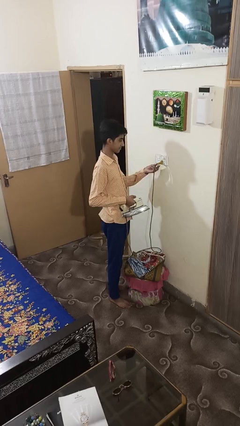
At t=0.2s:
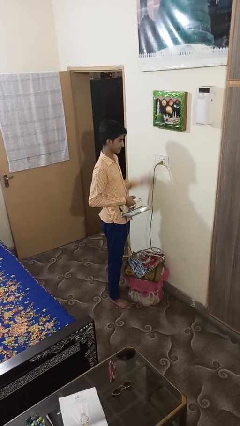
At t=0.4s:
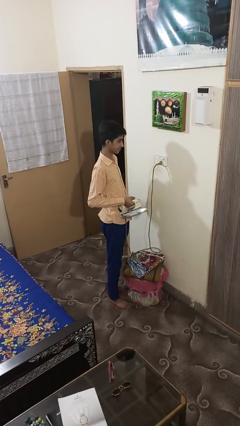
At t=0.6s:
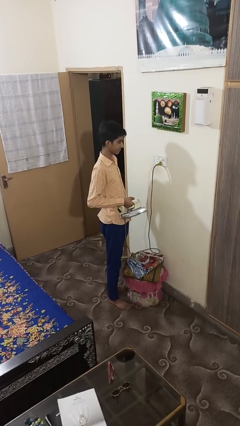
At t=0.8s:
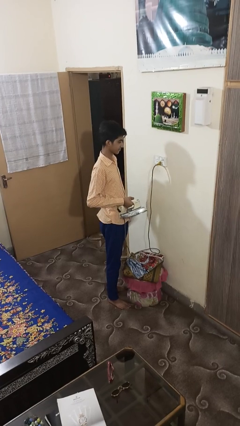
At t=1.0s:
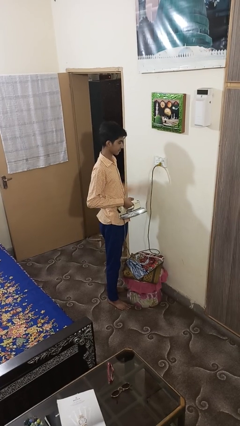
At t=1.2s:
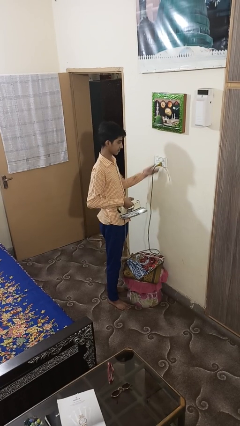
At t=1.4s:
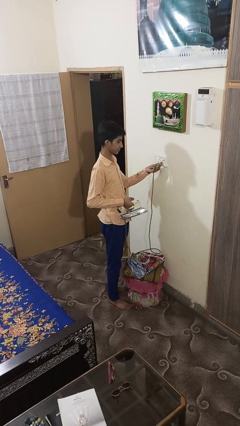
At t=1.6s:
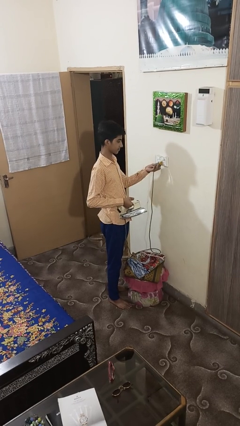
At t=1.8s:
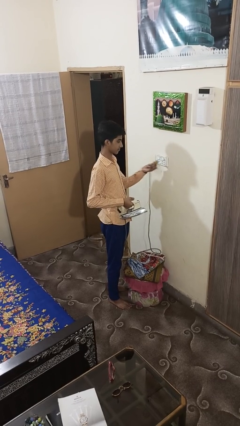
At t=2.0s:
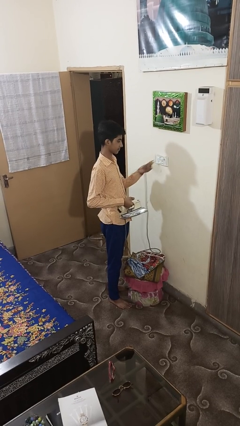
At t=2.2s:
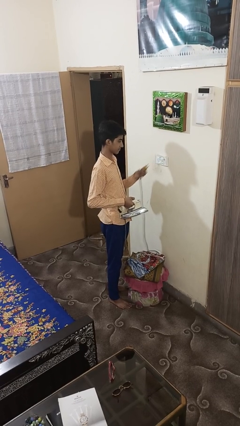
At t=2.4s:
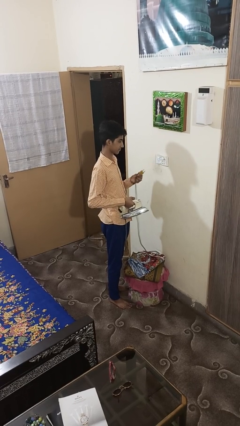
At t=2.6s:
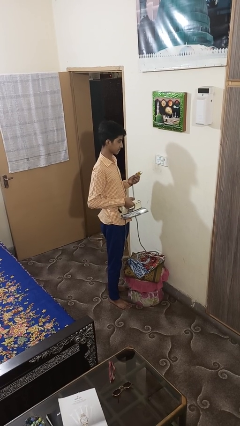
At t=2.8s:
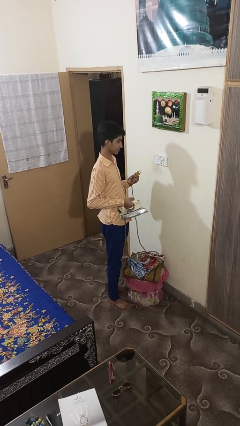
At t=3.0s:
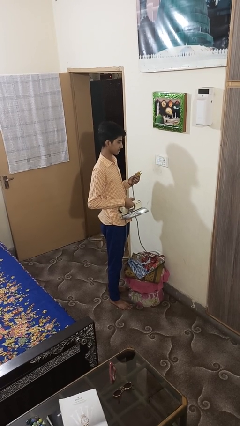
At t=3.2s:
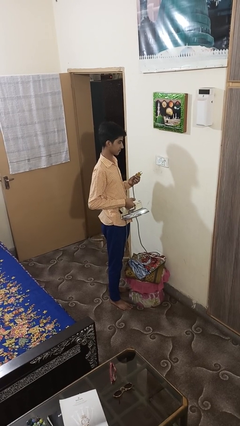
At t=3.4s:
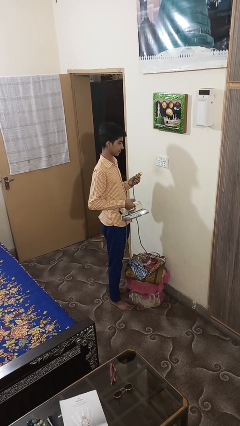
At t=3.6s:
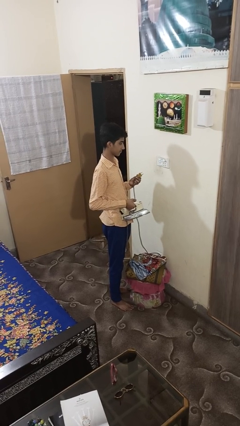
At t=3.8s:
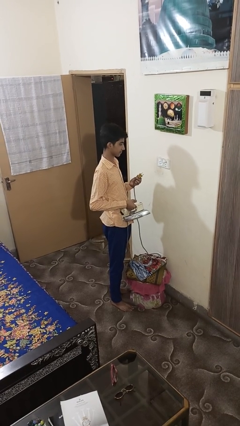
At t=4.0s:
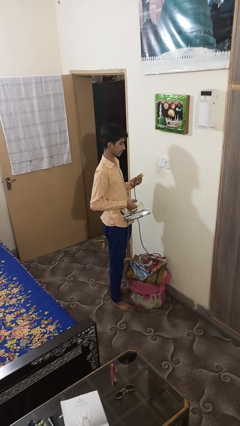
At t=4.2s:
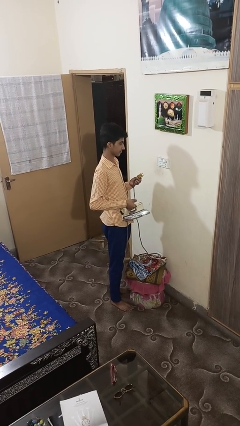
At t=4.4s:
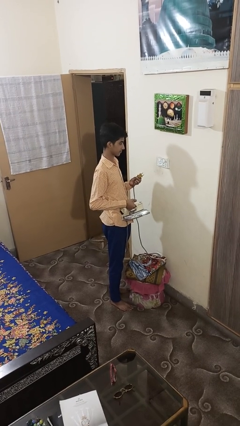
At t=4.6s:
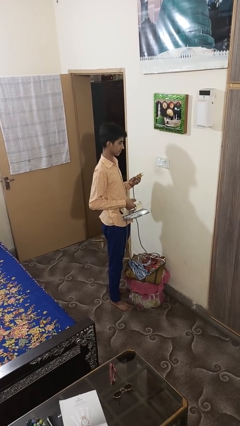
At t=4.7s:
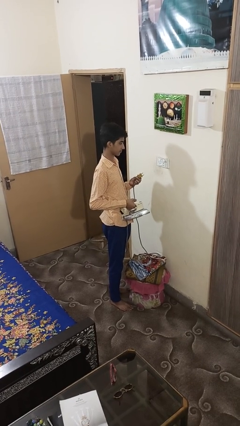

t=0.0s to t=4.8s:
person unplugs from electrical socket

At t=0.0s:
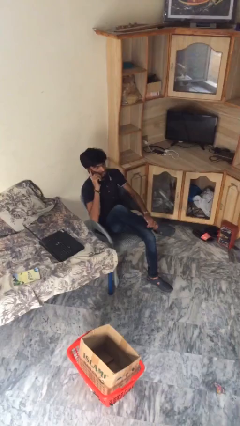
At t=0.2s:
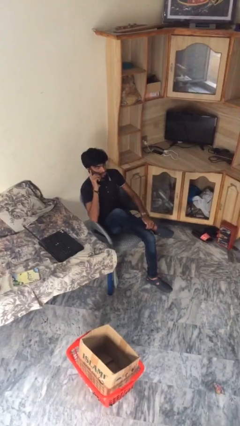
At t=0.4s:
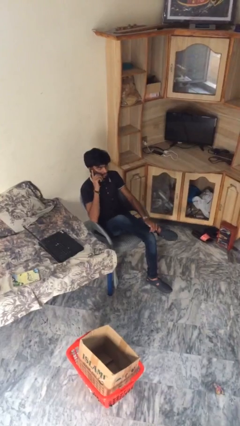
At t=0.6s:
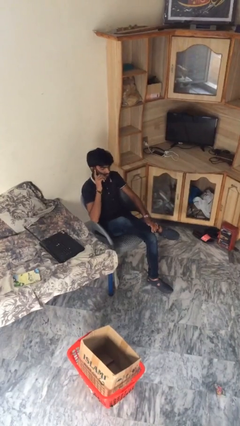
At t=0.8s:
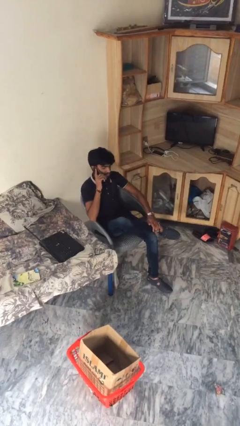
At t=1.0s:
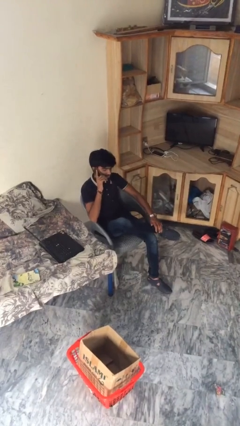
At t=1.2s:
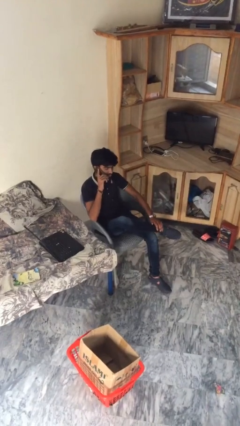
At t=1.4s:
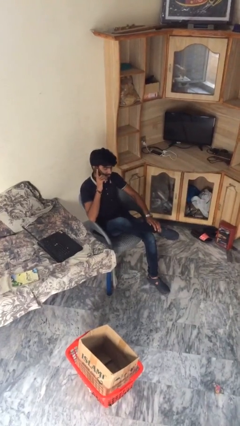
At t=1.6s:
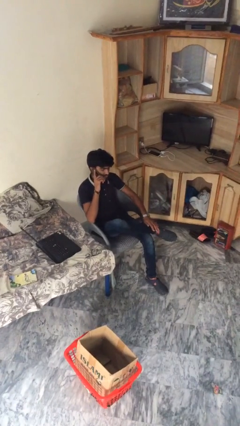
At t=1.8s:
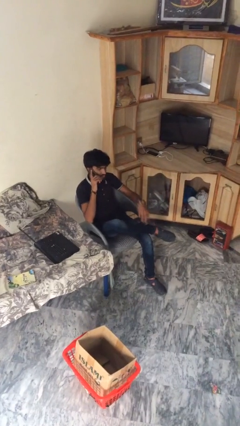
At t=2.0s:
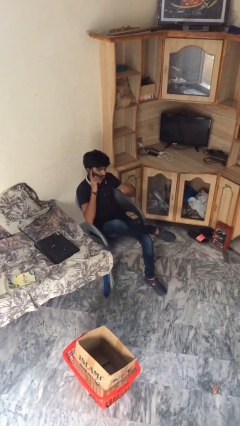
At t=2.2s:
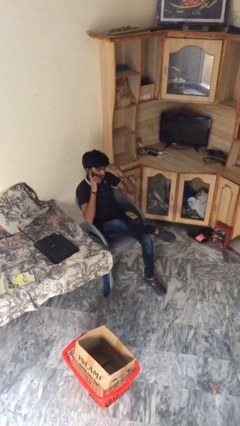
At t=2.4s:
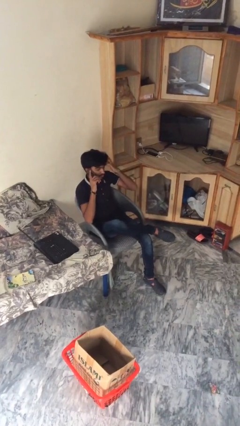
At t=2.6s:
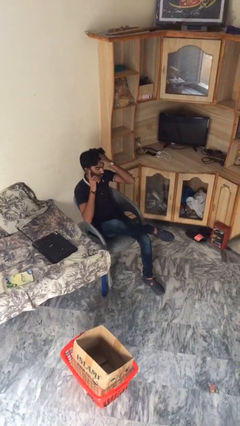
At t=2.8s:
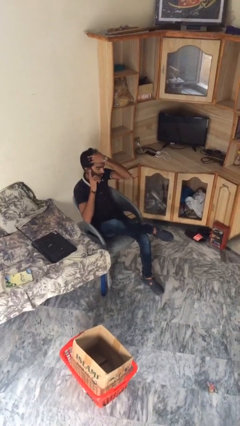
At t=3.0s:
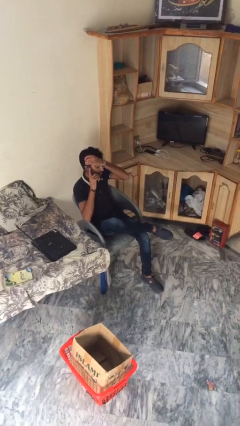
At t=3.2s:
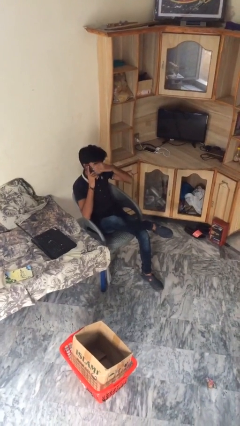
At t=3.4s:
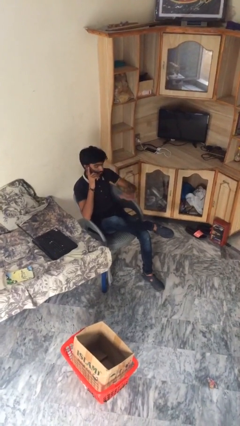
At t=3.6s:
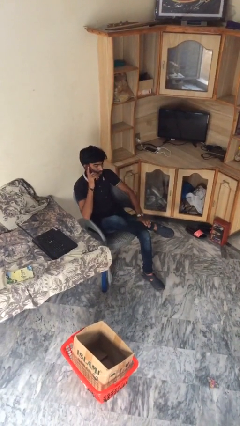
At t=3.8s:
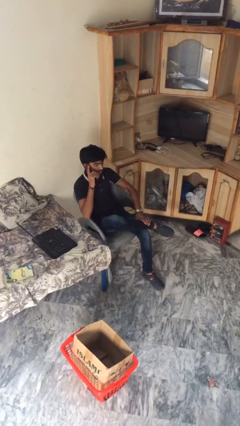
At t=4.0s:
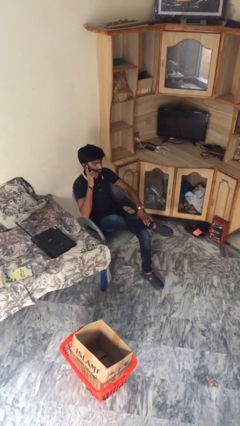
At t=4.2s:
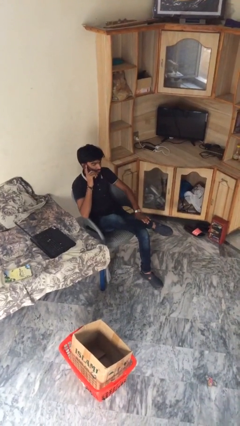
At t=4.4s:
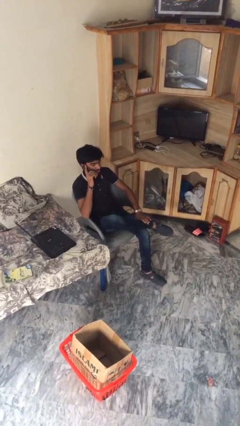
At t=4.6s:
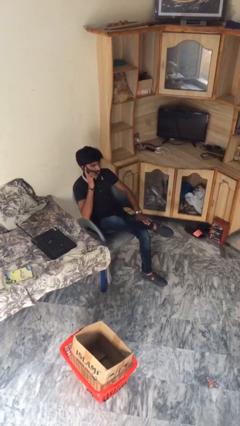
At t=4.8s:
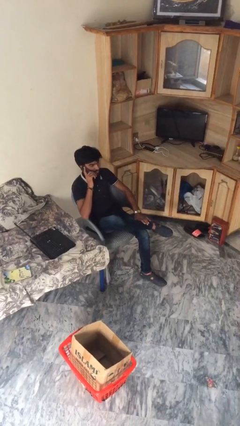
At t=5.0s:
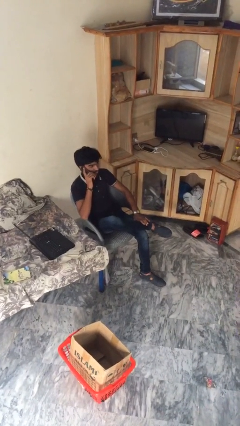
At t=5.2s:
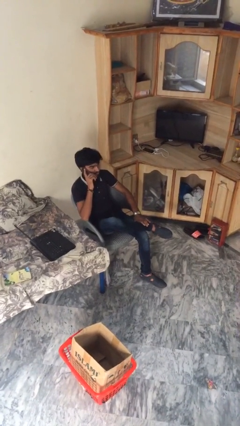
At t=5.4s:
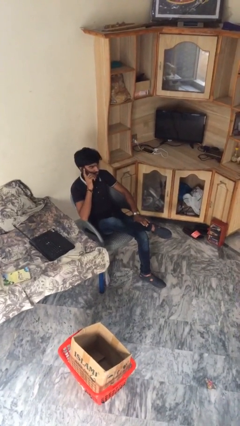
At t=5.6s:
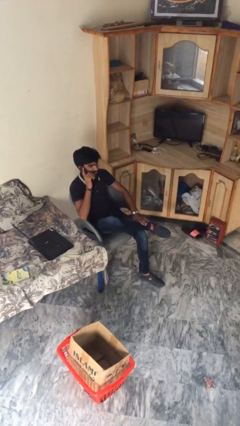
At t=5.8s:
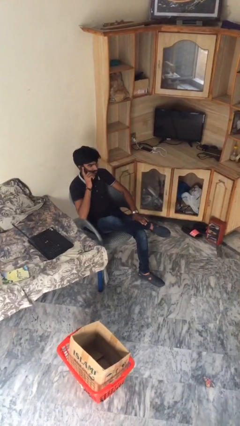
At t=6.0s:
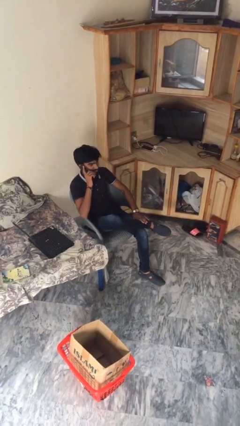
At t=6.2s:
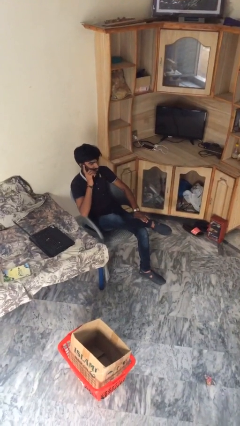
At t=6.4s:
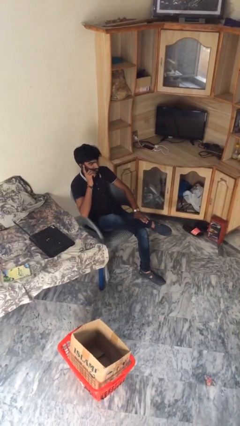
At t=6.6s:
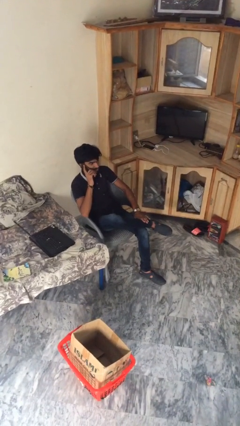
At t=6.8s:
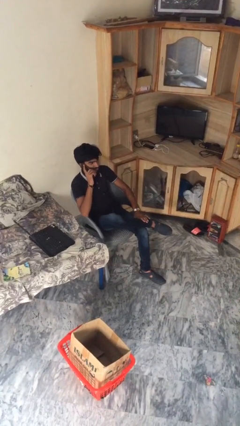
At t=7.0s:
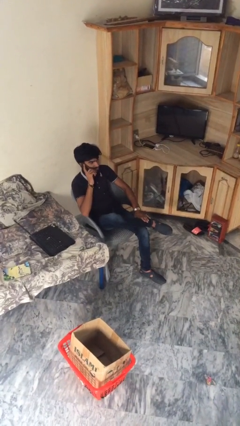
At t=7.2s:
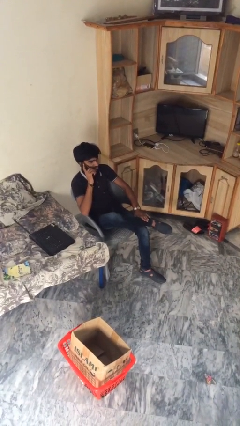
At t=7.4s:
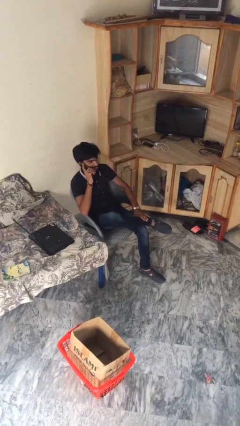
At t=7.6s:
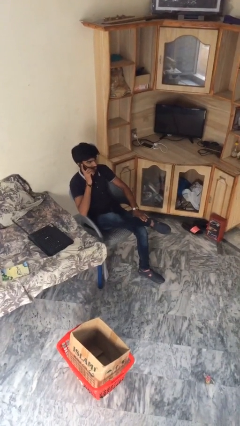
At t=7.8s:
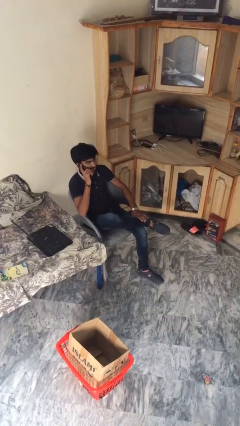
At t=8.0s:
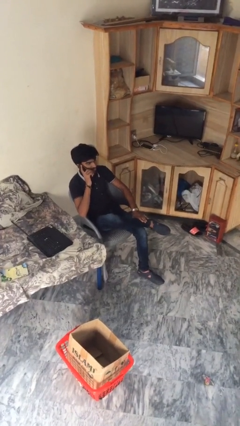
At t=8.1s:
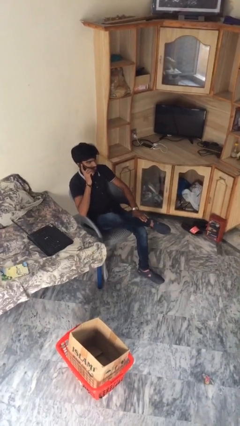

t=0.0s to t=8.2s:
person talks on phone

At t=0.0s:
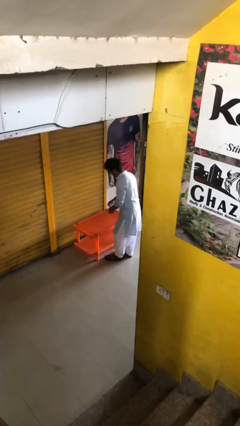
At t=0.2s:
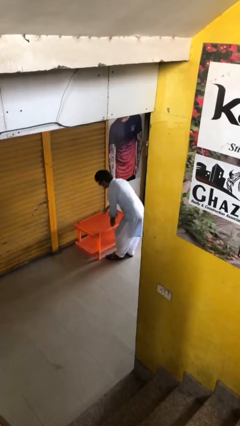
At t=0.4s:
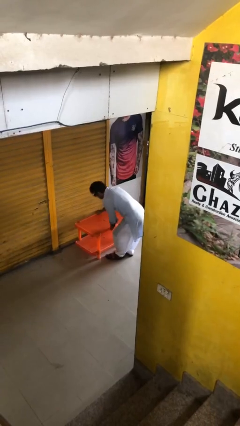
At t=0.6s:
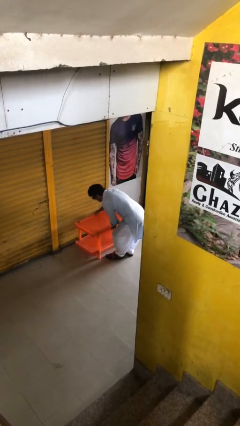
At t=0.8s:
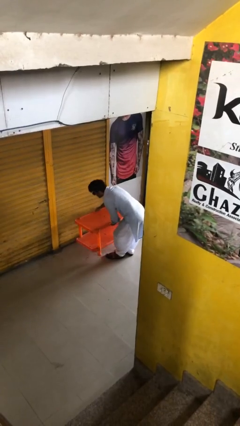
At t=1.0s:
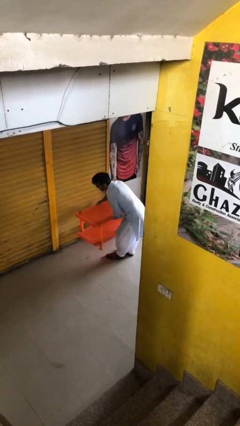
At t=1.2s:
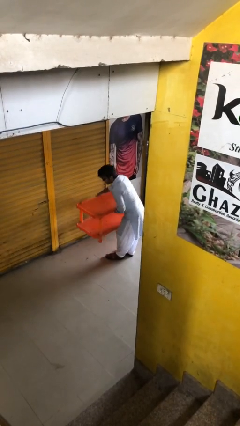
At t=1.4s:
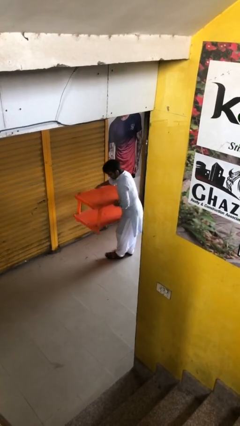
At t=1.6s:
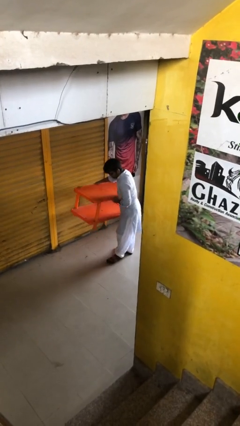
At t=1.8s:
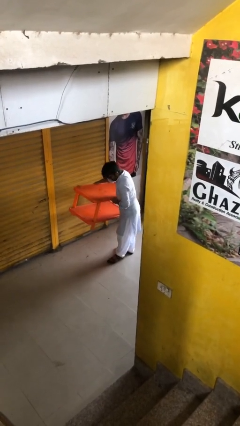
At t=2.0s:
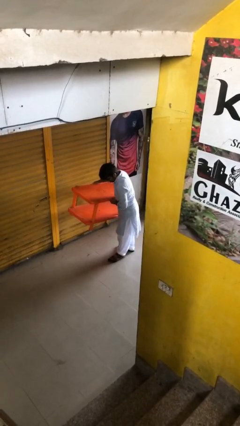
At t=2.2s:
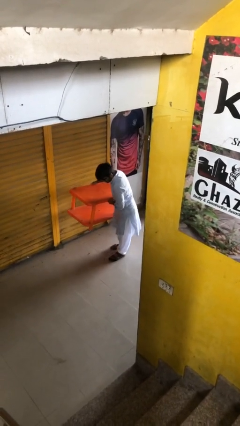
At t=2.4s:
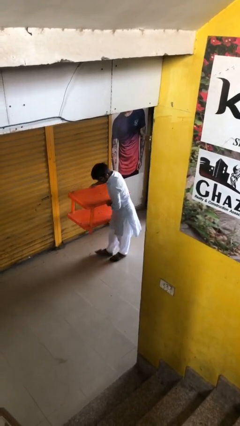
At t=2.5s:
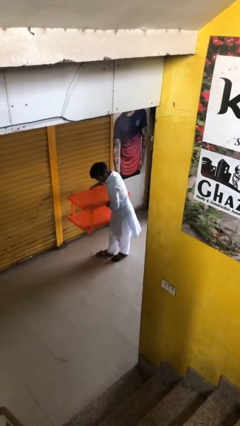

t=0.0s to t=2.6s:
person picks up object from floor

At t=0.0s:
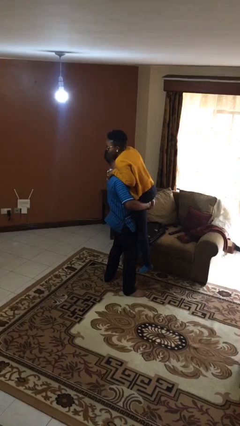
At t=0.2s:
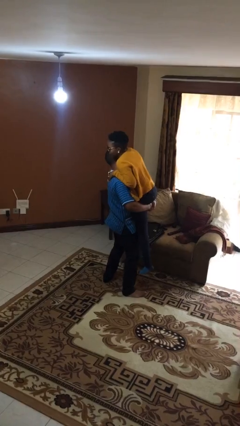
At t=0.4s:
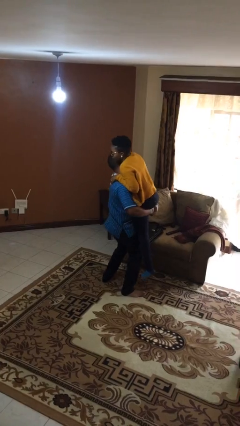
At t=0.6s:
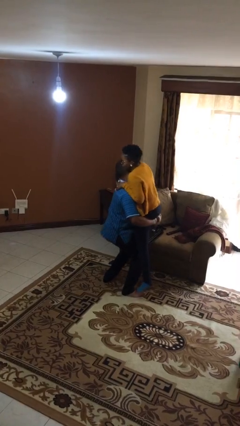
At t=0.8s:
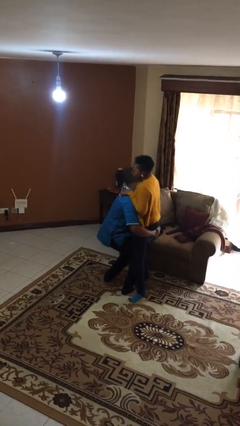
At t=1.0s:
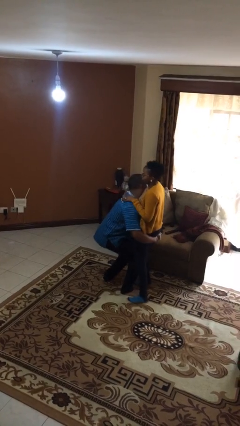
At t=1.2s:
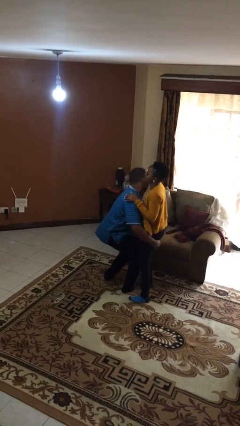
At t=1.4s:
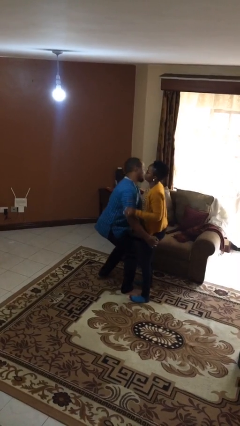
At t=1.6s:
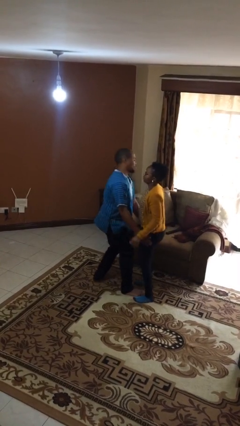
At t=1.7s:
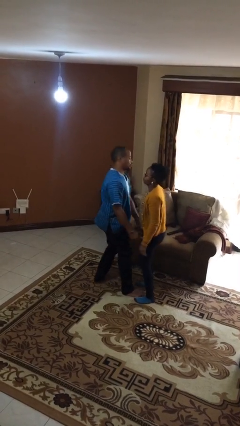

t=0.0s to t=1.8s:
person puts down person

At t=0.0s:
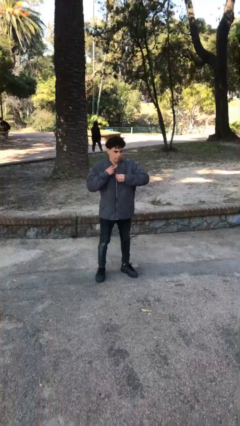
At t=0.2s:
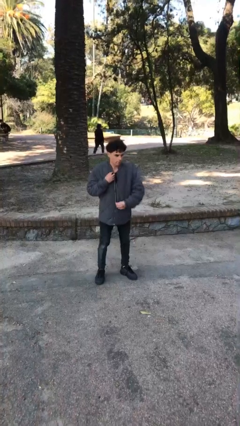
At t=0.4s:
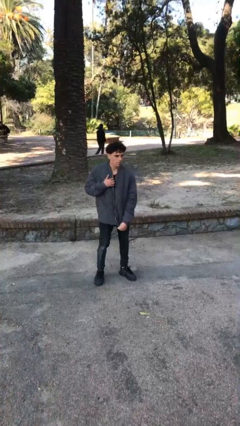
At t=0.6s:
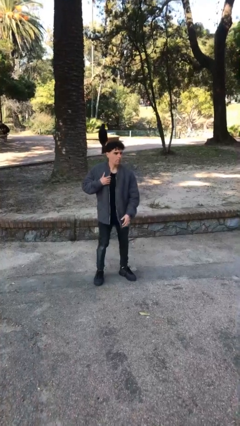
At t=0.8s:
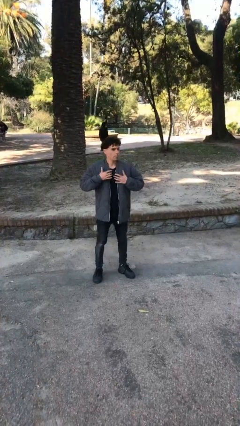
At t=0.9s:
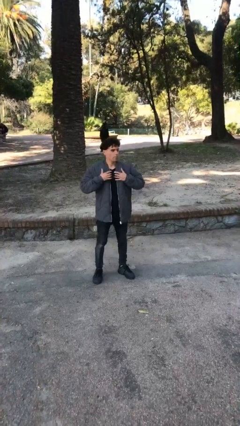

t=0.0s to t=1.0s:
person unzips jacket
